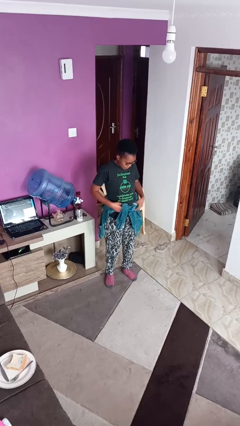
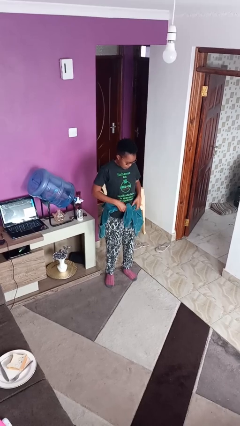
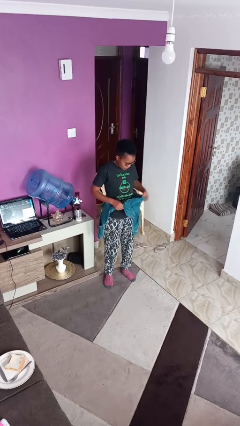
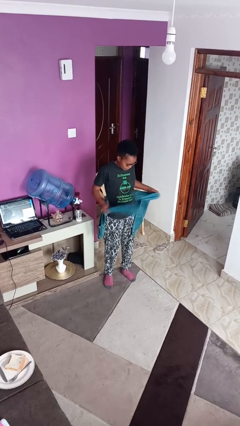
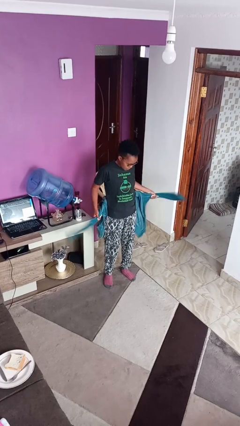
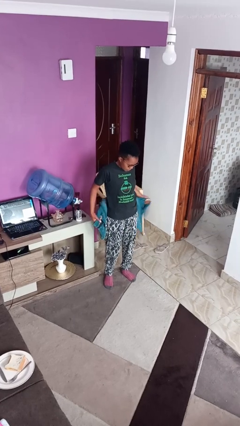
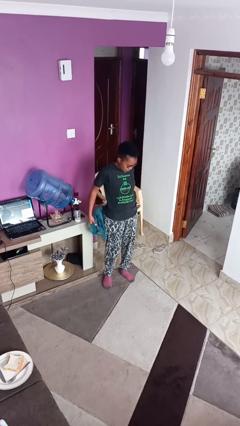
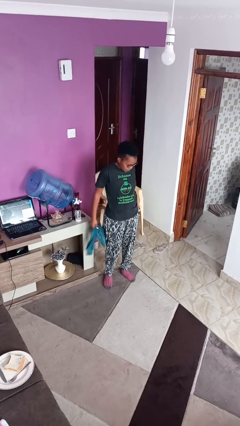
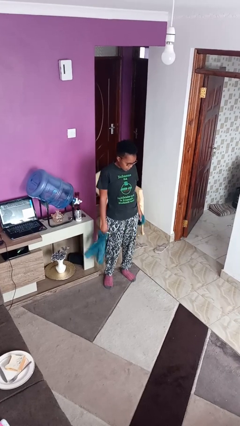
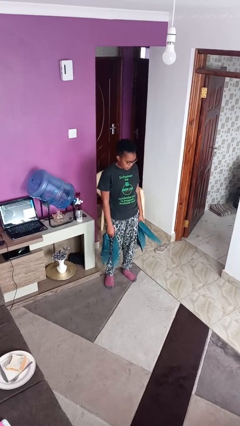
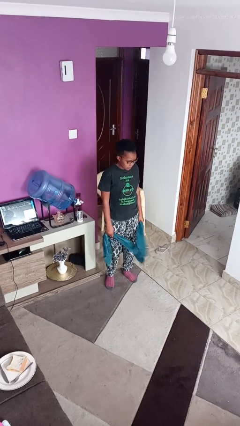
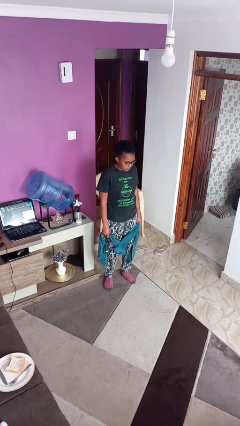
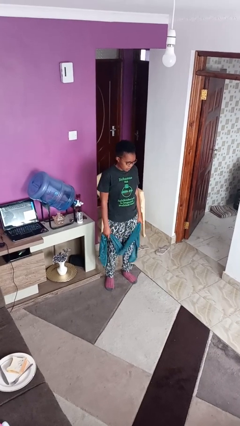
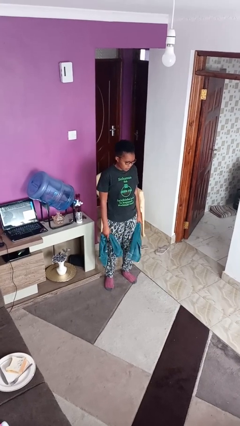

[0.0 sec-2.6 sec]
person unties jacket around waist

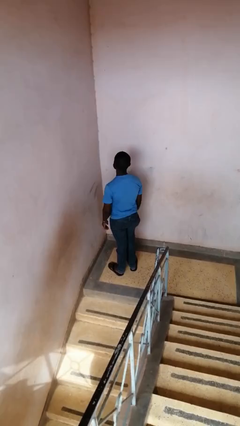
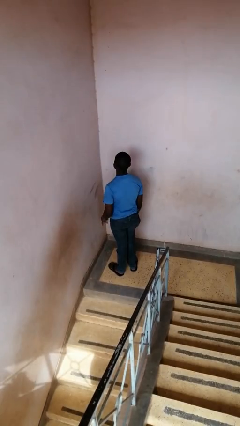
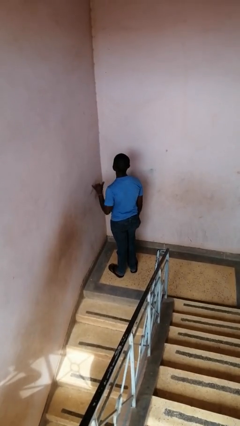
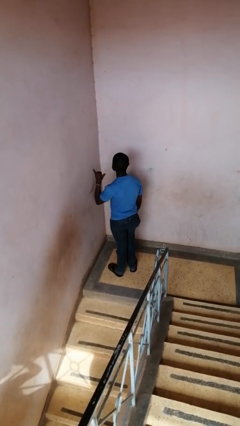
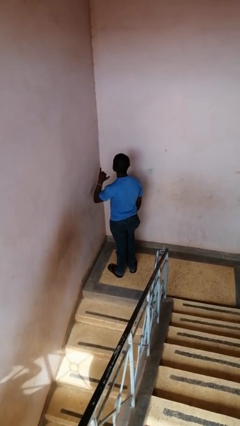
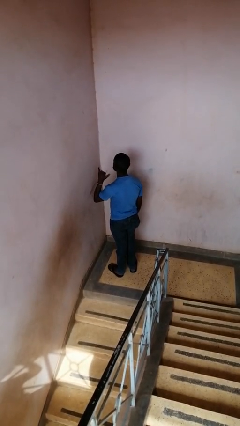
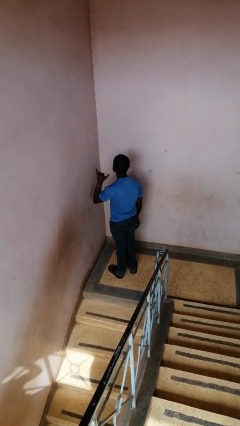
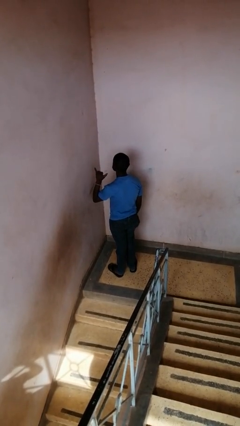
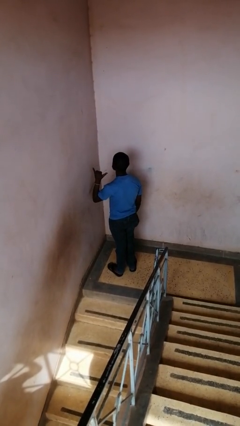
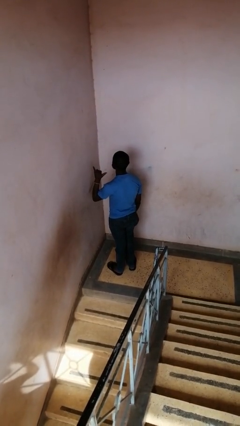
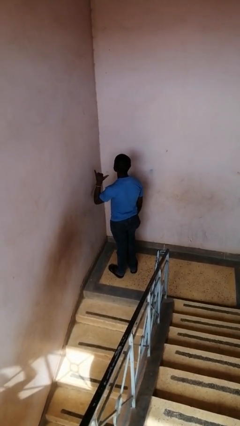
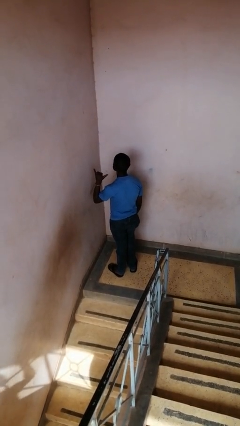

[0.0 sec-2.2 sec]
person gestures hang loose

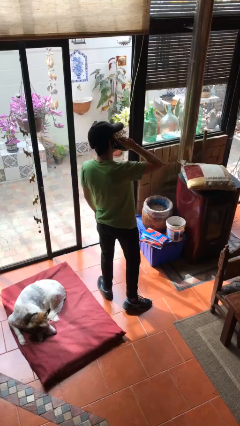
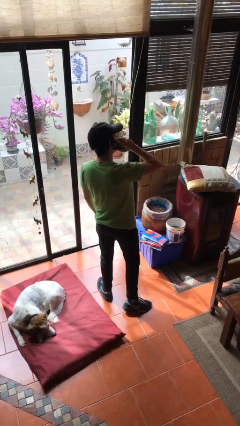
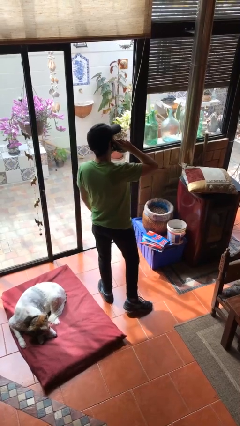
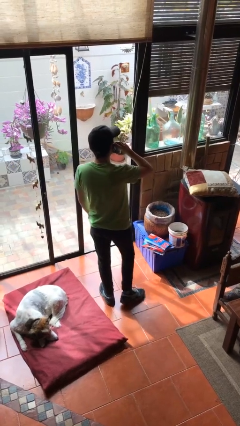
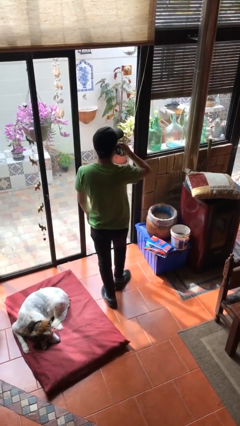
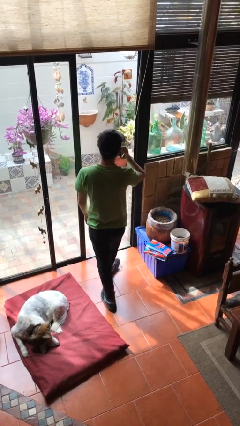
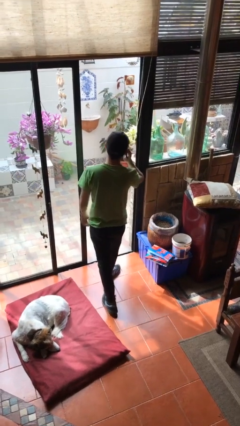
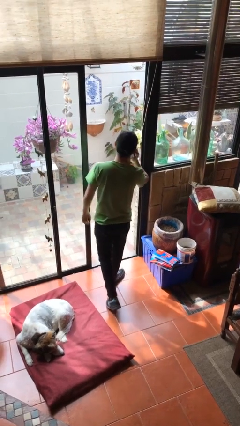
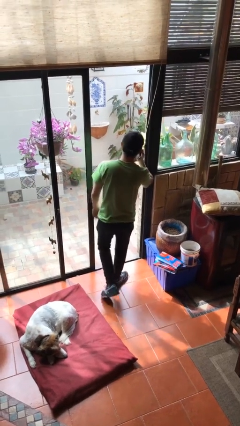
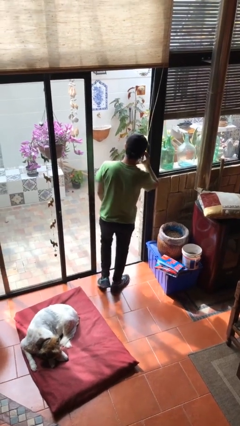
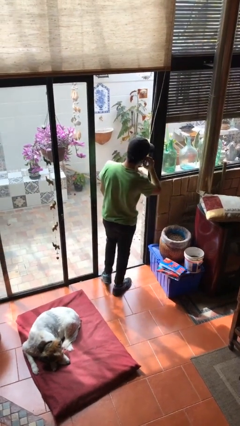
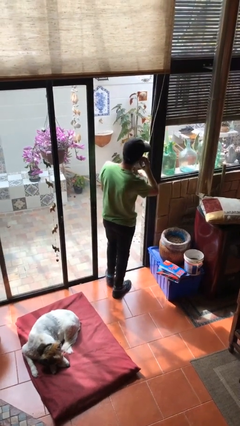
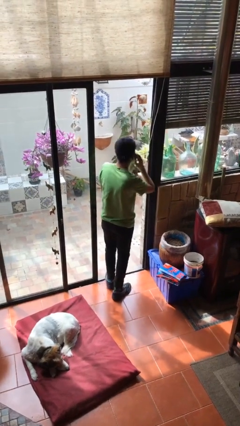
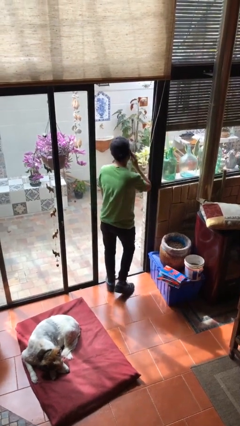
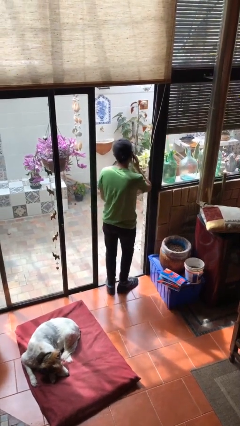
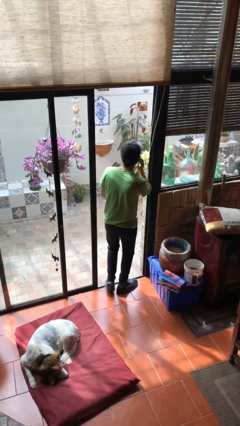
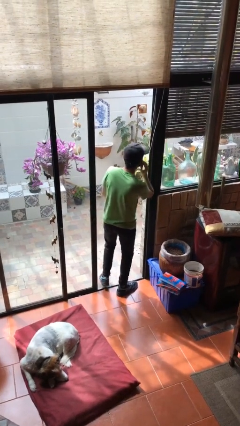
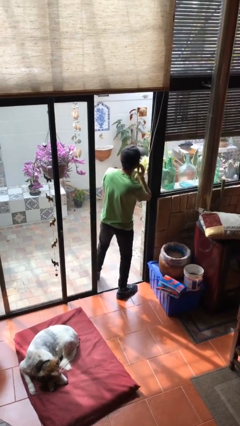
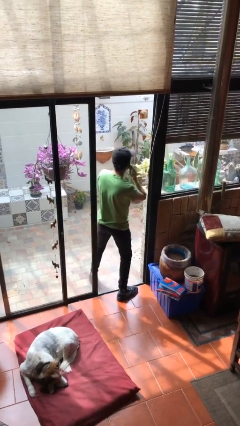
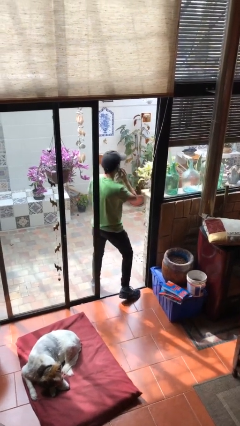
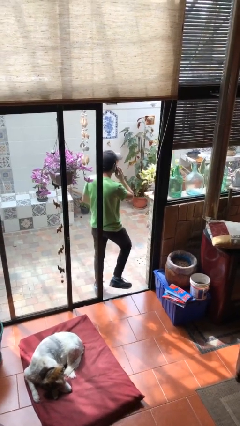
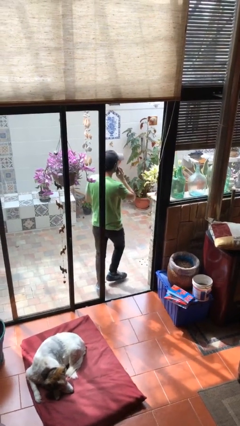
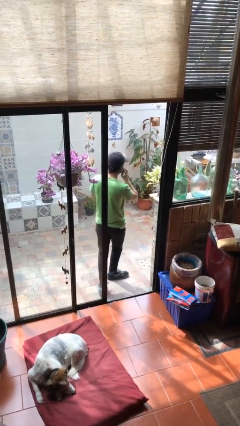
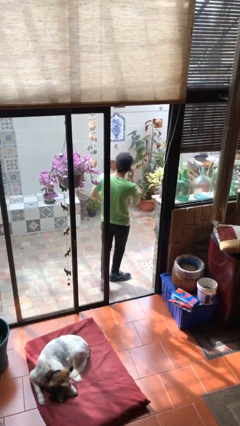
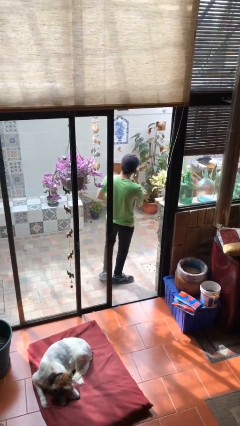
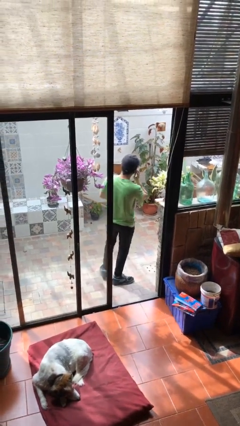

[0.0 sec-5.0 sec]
person exits scene through structure

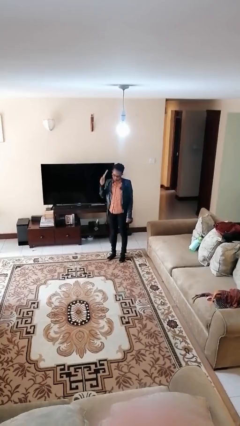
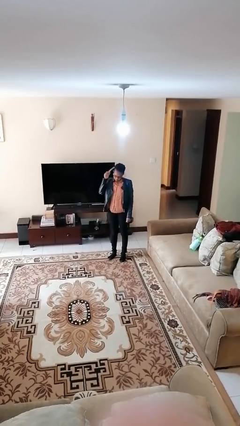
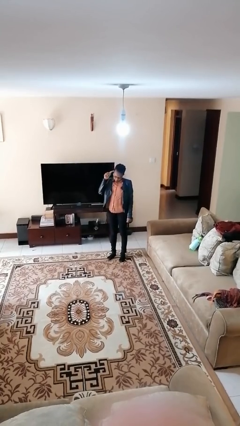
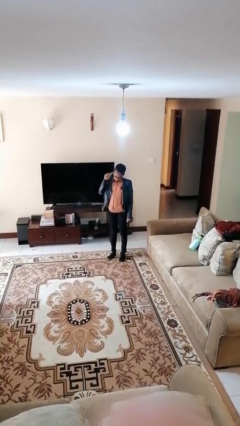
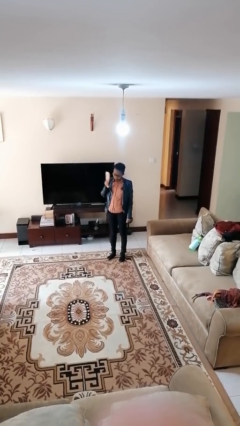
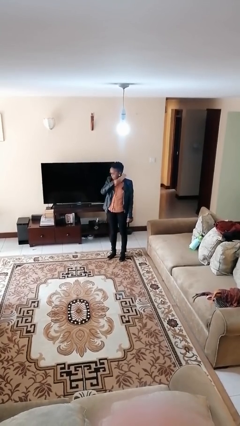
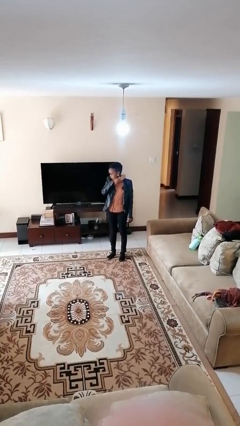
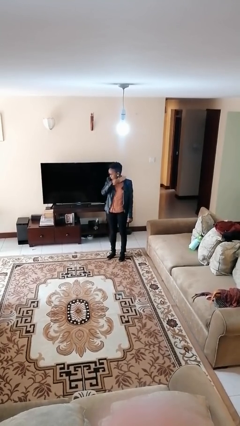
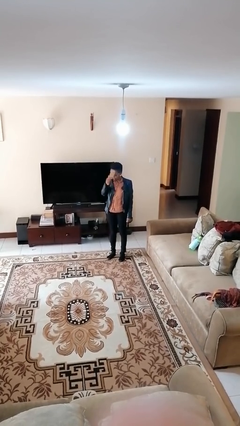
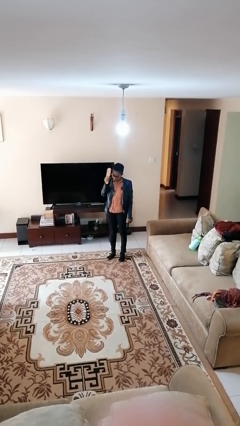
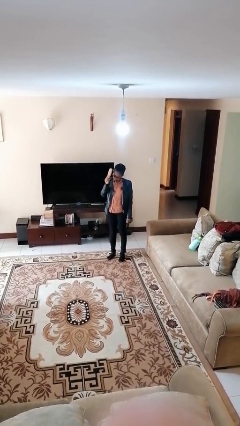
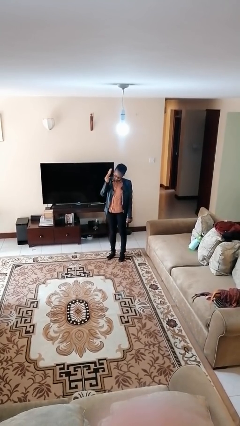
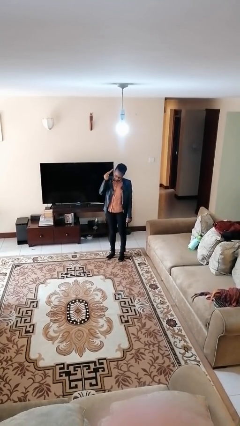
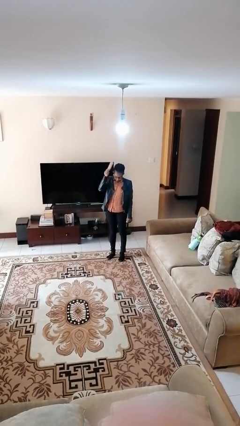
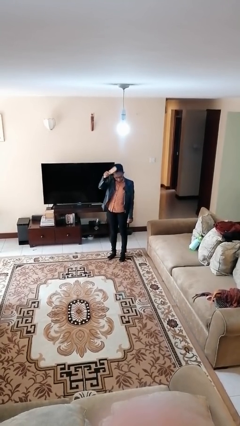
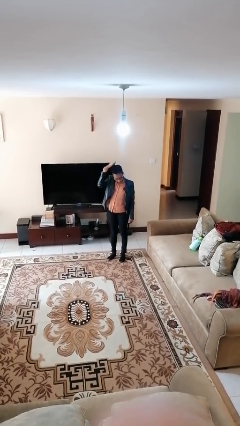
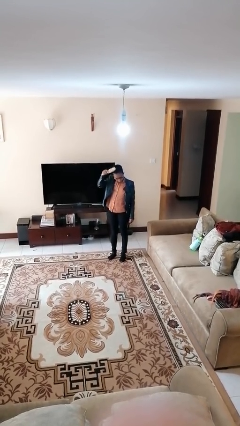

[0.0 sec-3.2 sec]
person brushes hair

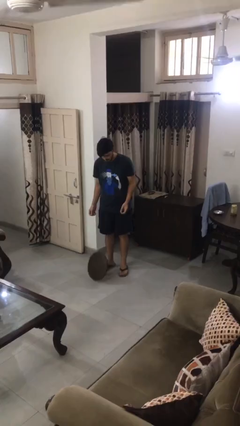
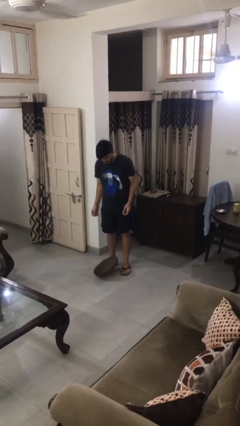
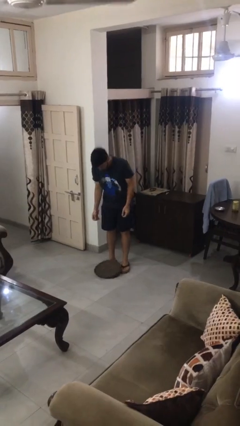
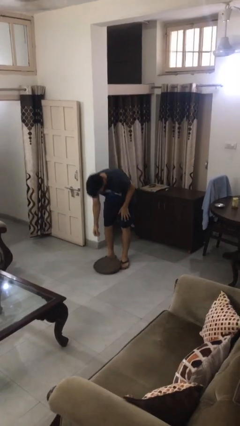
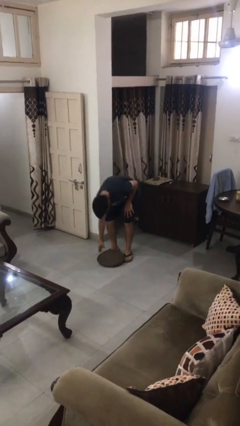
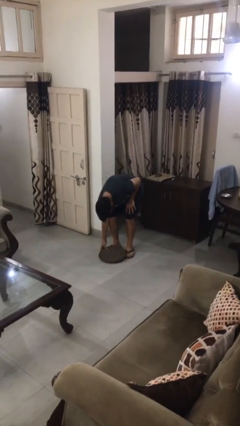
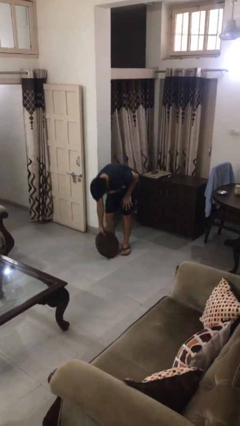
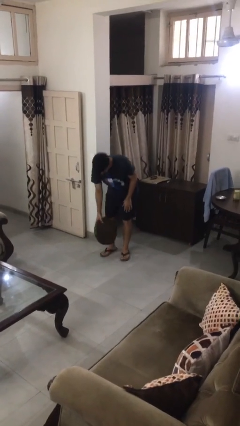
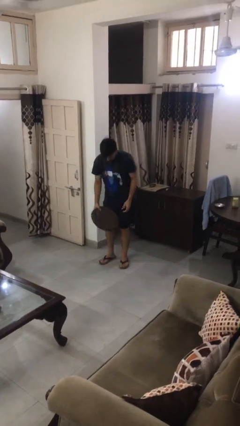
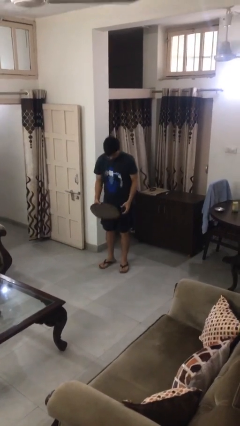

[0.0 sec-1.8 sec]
person picks up object from floor

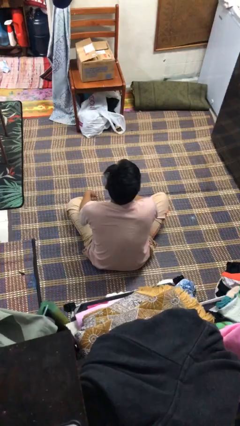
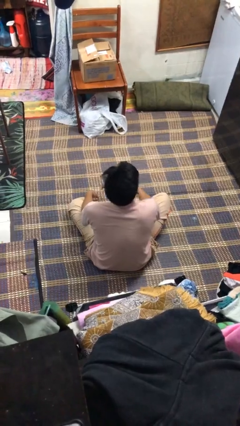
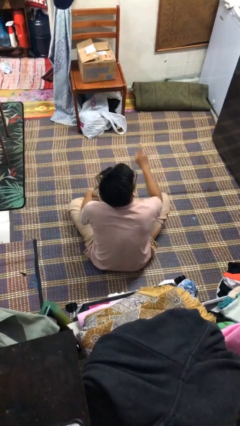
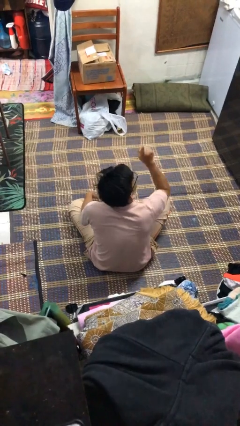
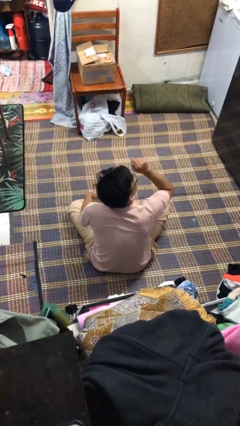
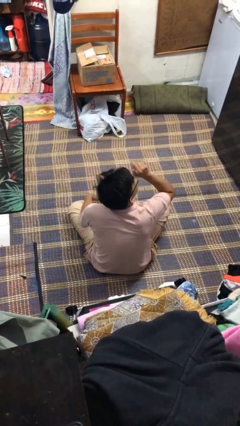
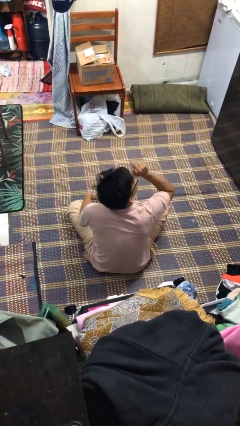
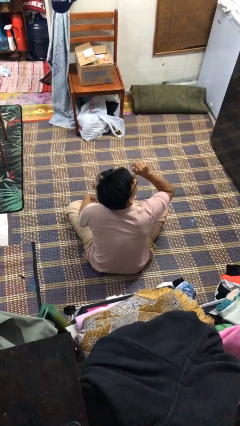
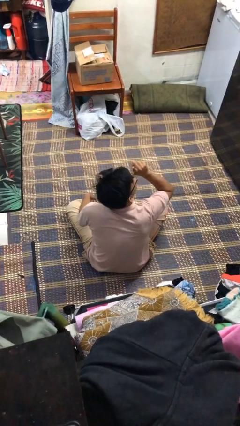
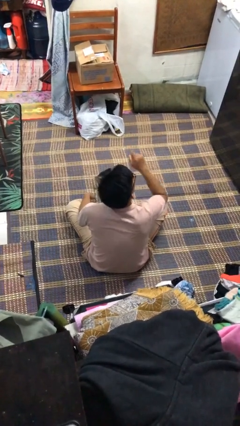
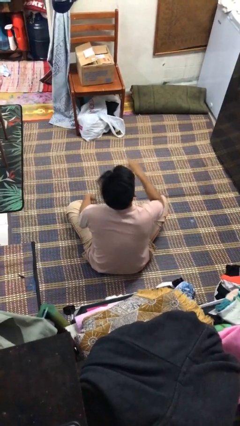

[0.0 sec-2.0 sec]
person gestures be quiet

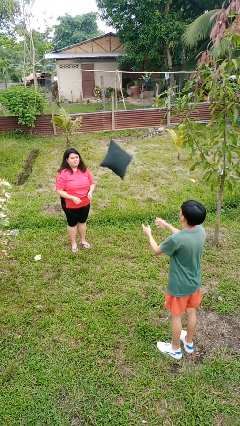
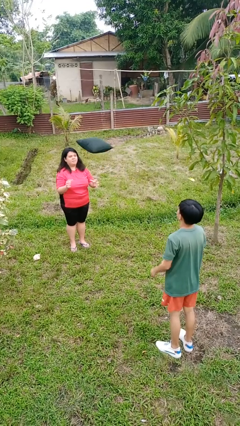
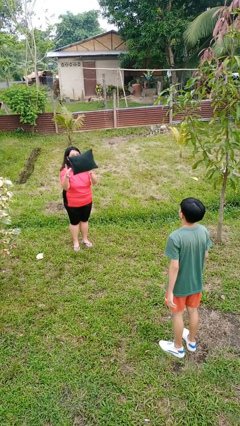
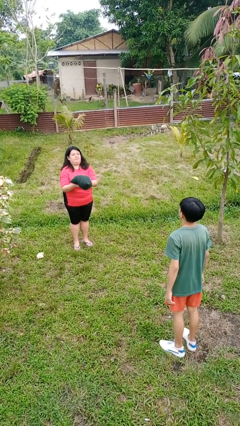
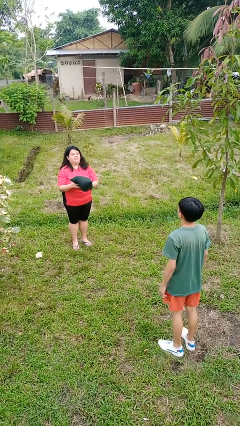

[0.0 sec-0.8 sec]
person catches object from person
